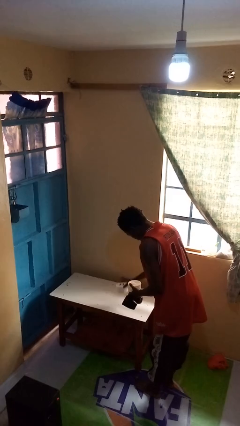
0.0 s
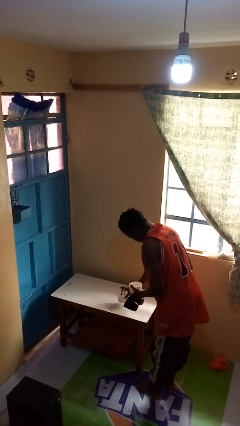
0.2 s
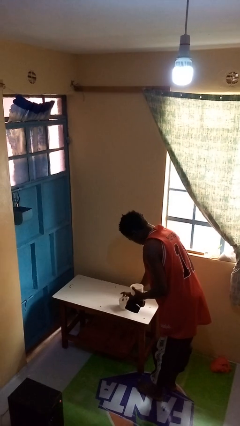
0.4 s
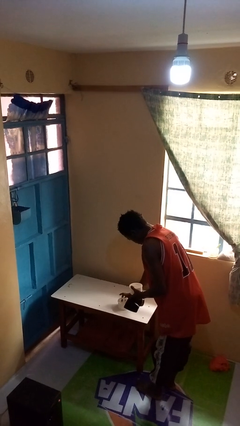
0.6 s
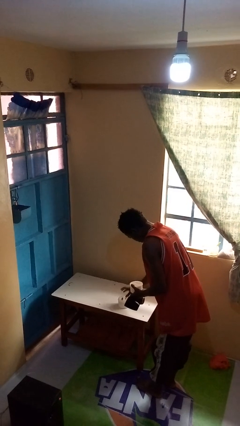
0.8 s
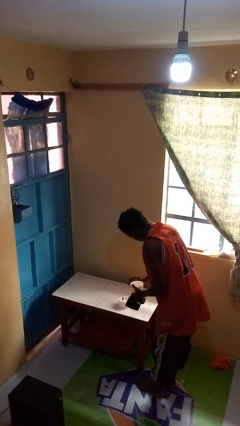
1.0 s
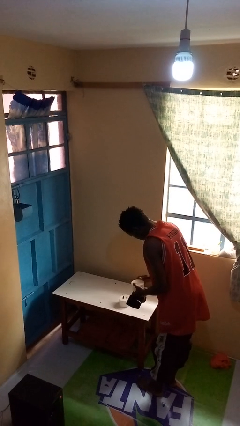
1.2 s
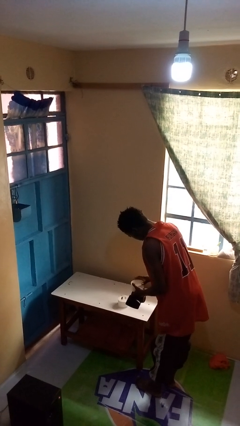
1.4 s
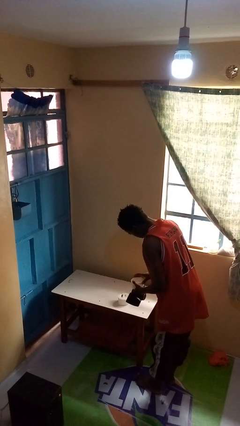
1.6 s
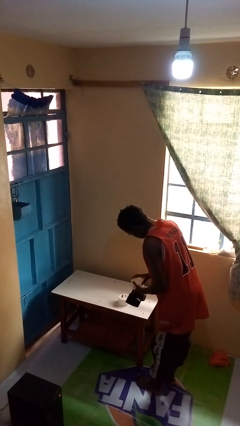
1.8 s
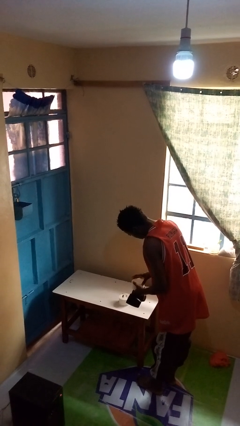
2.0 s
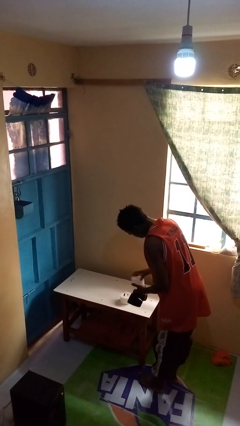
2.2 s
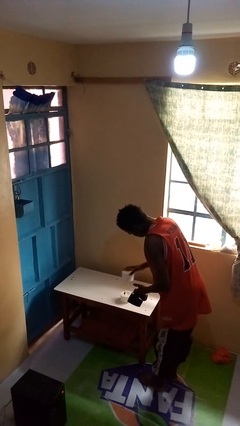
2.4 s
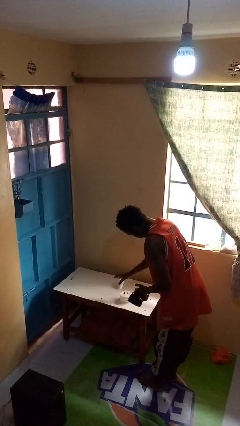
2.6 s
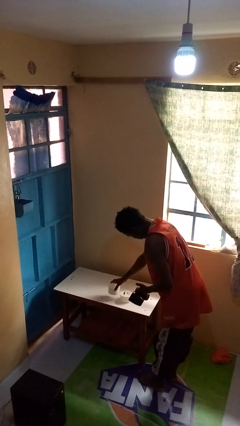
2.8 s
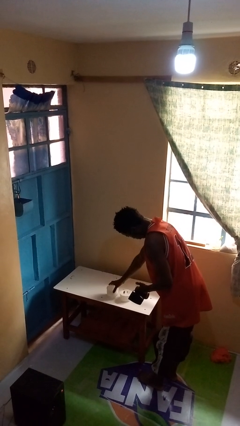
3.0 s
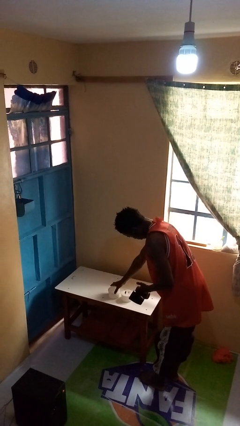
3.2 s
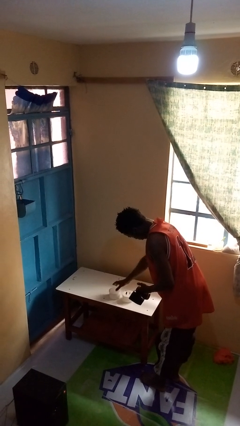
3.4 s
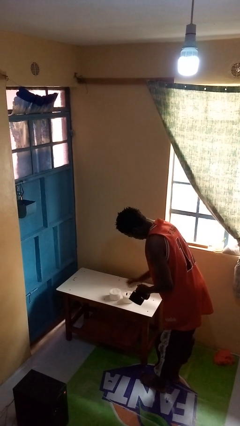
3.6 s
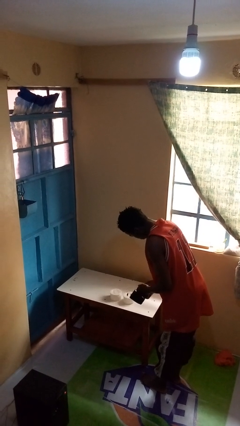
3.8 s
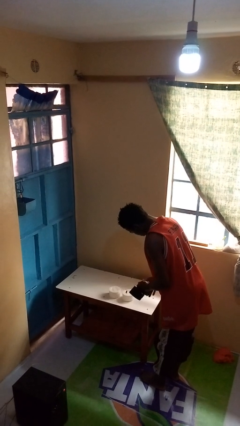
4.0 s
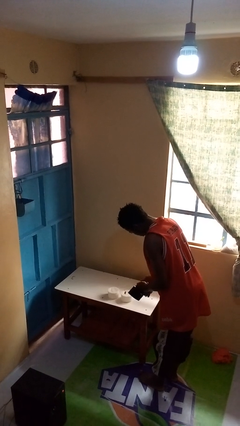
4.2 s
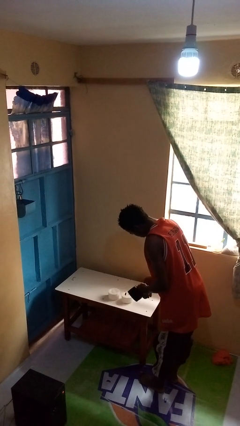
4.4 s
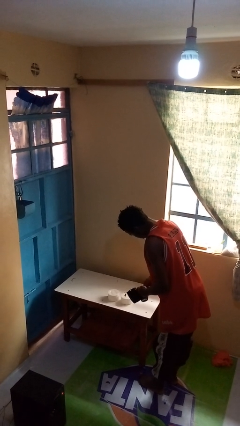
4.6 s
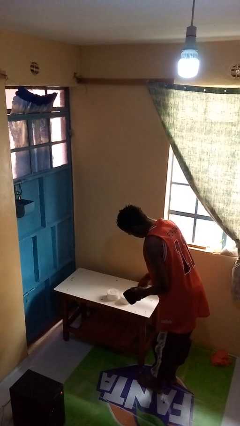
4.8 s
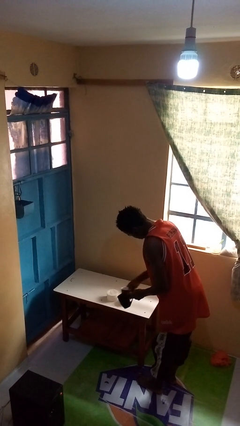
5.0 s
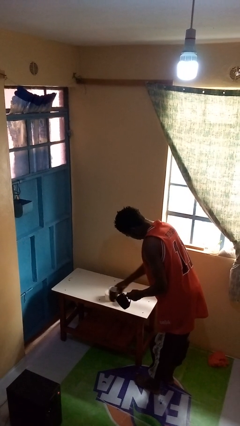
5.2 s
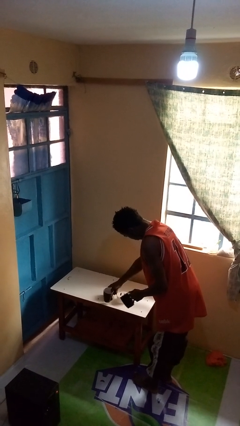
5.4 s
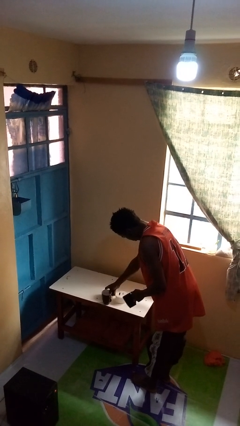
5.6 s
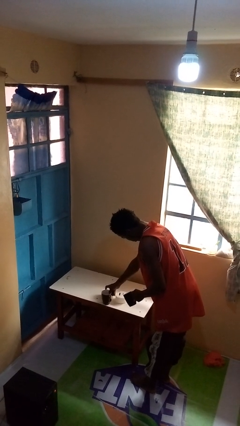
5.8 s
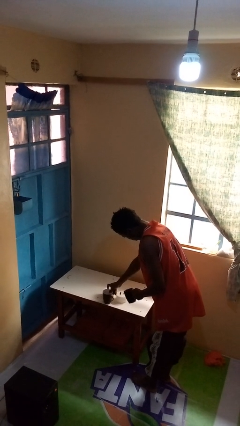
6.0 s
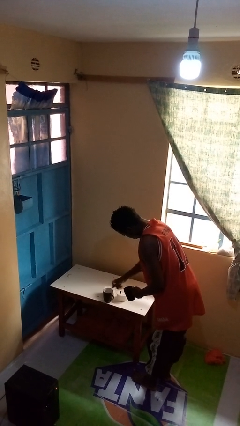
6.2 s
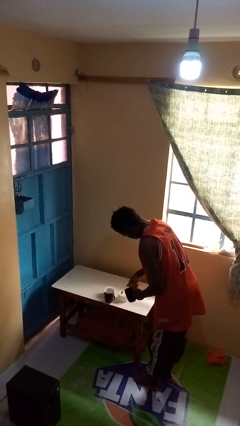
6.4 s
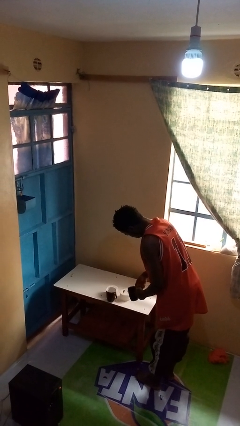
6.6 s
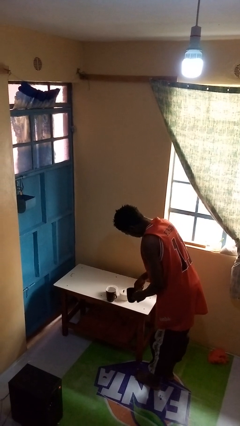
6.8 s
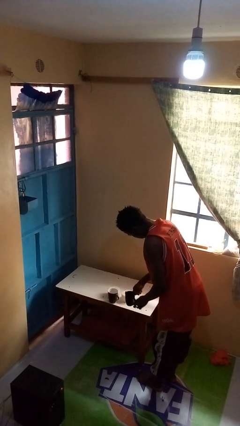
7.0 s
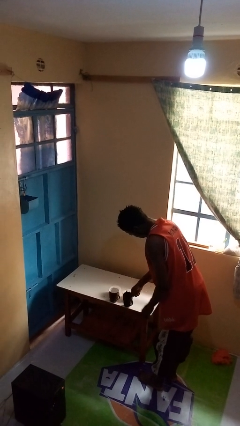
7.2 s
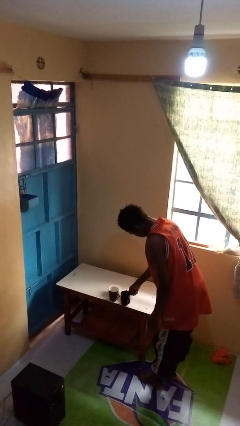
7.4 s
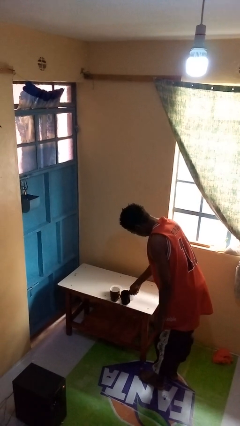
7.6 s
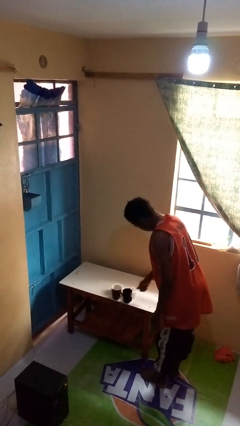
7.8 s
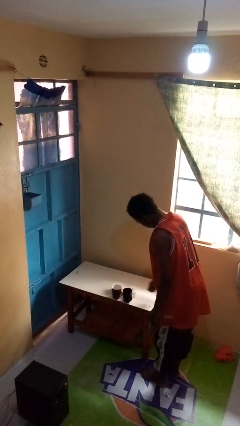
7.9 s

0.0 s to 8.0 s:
person sets table

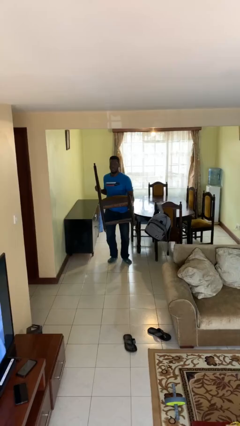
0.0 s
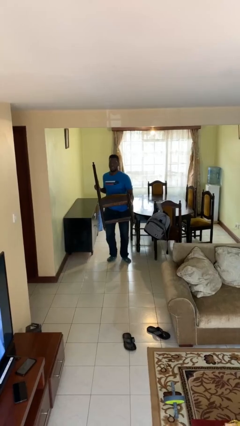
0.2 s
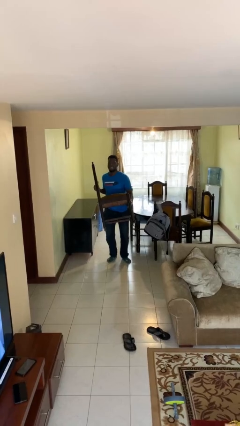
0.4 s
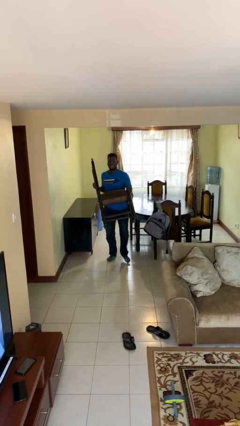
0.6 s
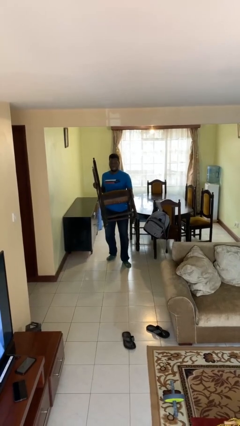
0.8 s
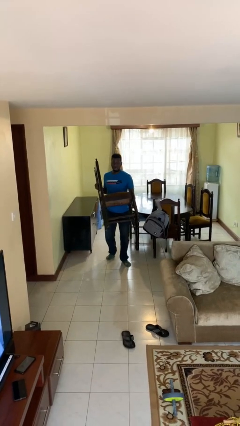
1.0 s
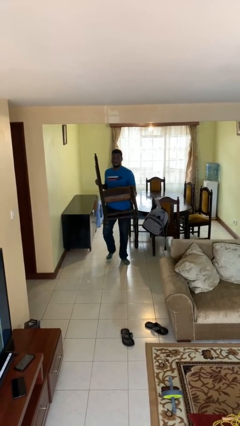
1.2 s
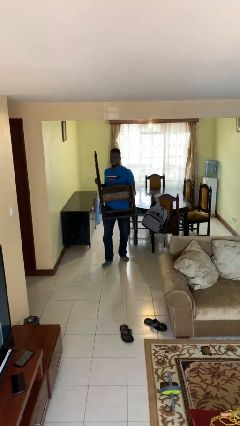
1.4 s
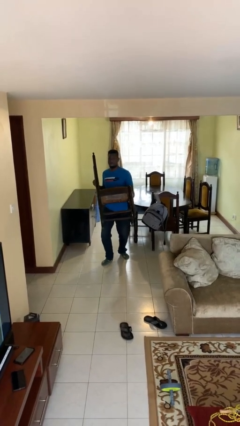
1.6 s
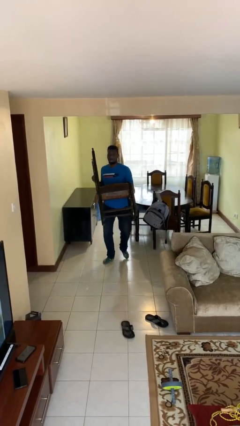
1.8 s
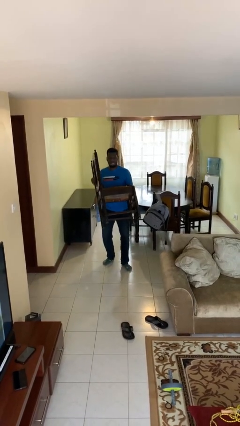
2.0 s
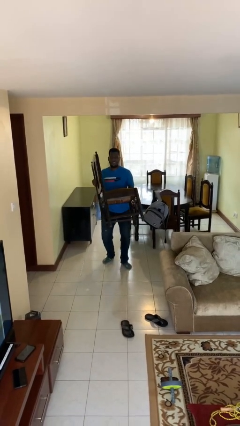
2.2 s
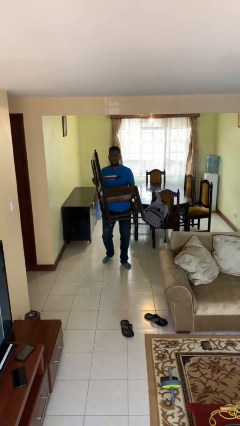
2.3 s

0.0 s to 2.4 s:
person carries heavy object

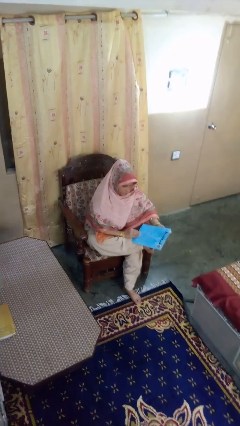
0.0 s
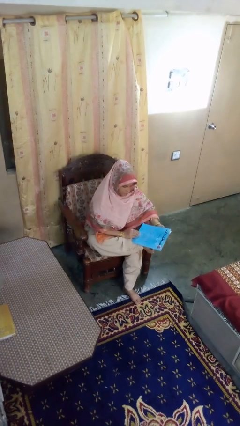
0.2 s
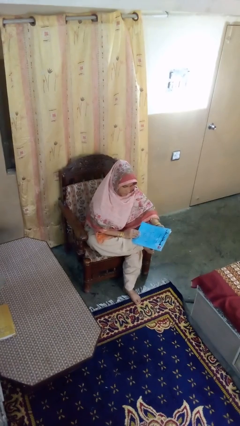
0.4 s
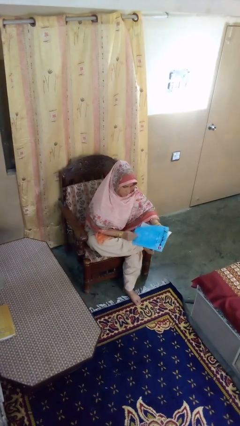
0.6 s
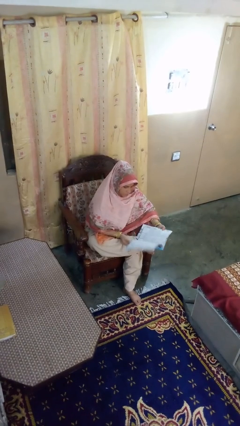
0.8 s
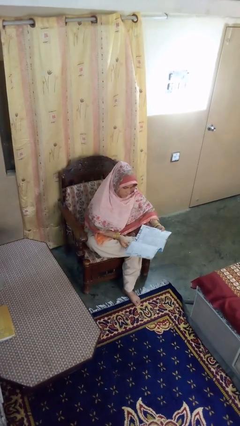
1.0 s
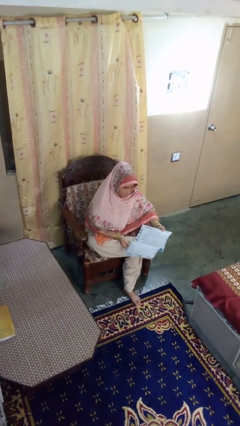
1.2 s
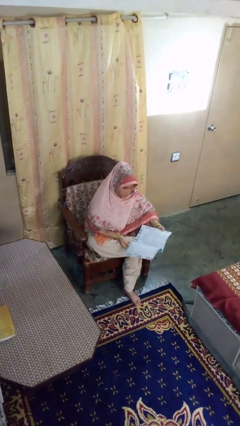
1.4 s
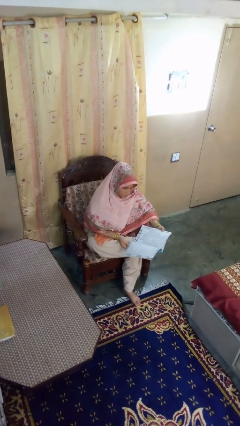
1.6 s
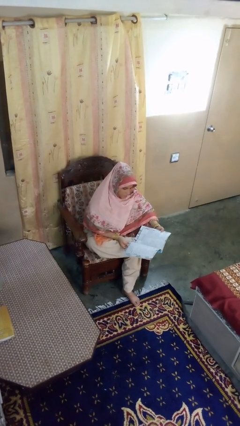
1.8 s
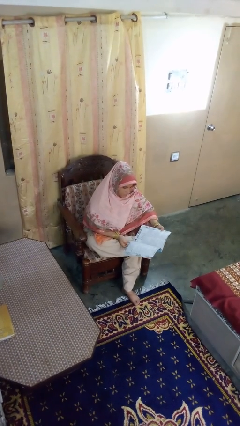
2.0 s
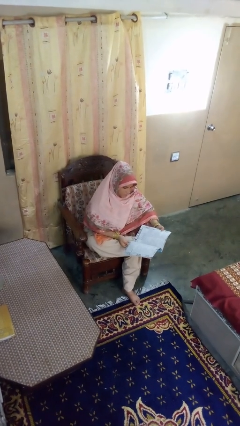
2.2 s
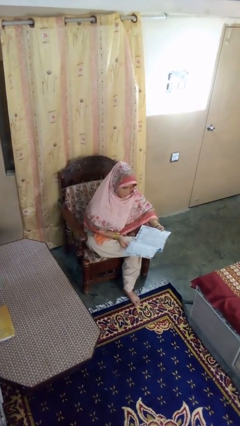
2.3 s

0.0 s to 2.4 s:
person reads magazine

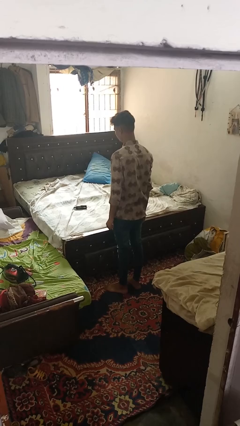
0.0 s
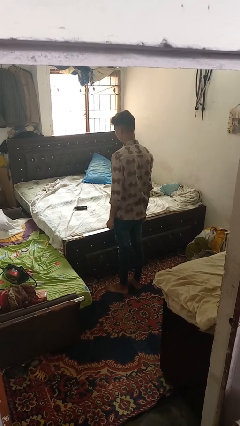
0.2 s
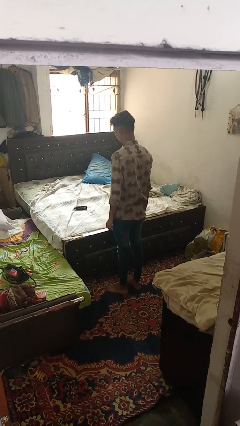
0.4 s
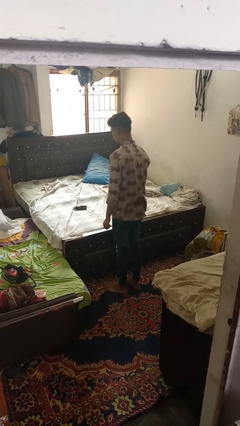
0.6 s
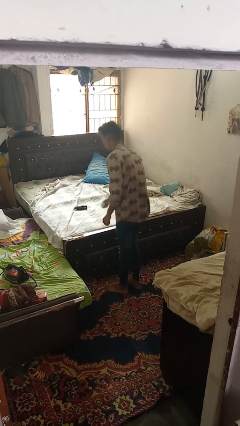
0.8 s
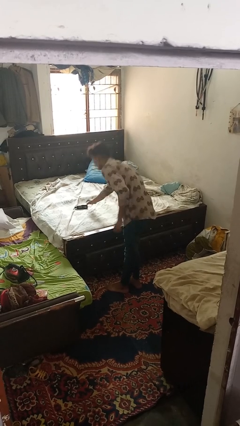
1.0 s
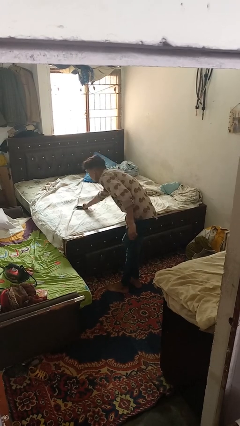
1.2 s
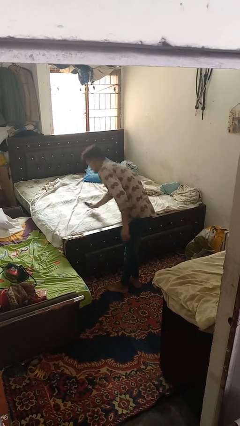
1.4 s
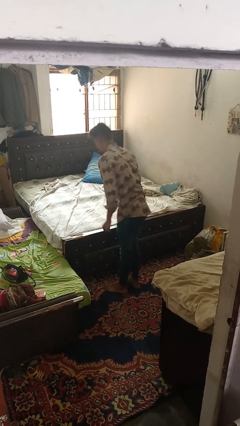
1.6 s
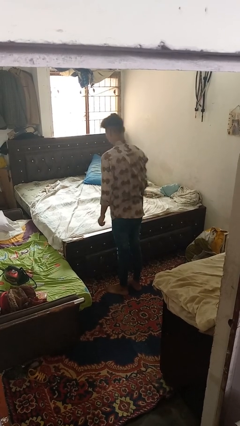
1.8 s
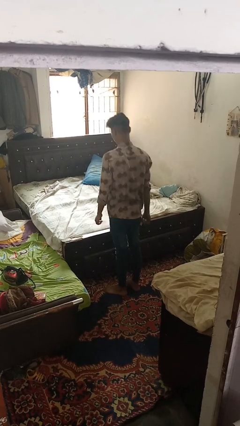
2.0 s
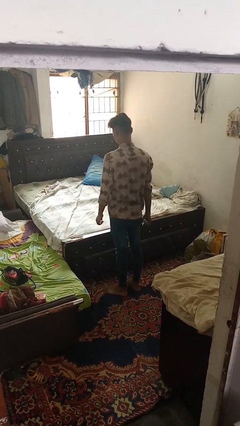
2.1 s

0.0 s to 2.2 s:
person picks up object from bed

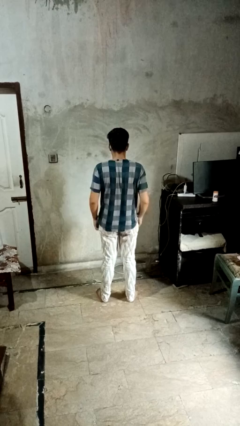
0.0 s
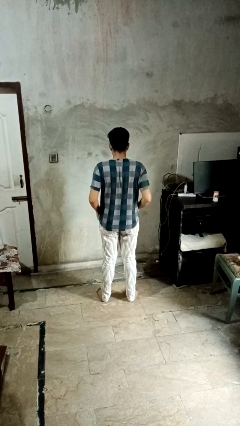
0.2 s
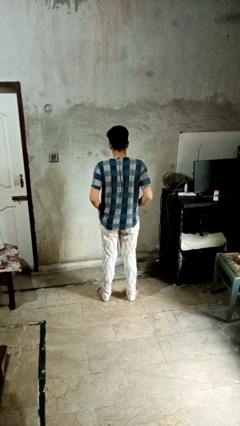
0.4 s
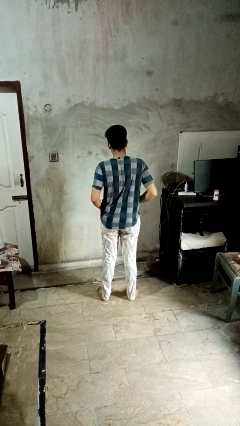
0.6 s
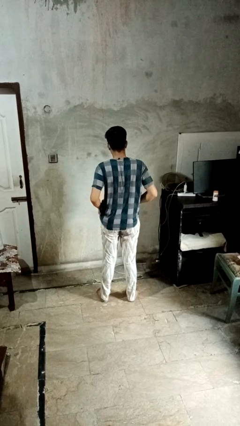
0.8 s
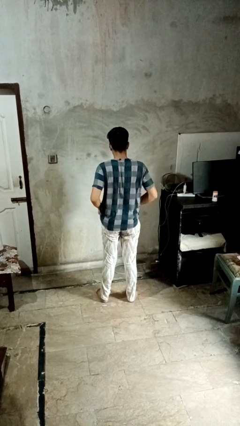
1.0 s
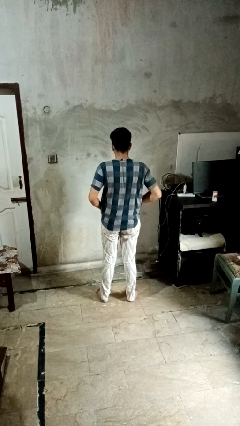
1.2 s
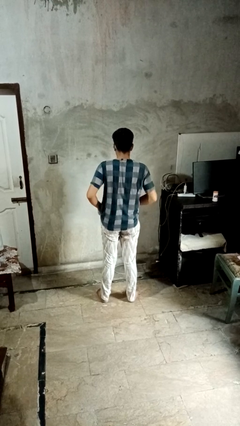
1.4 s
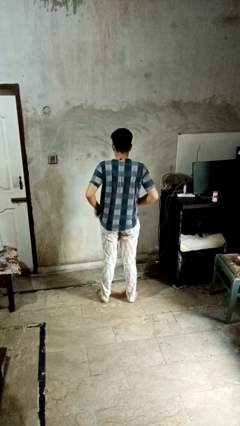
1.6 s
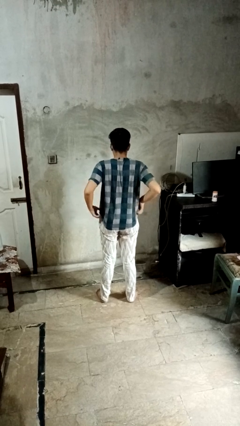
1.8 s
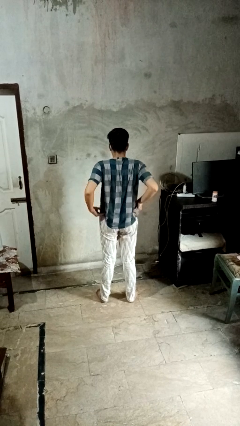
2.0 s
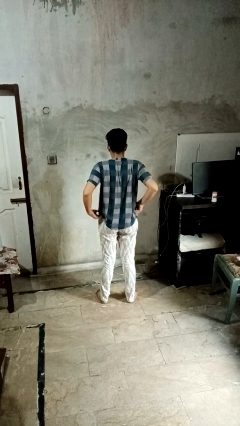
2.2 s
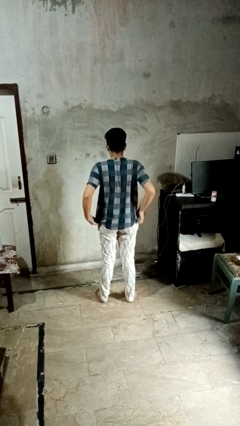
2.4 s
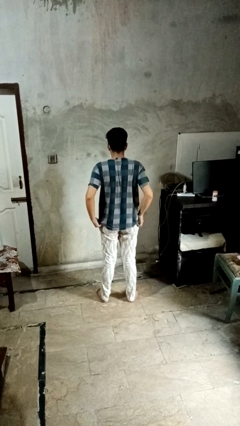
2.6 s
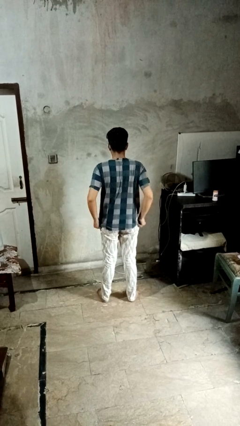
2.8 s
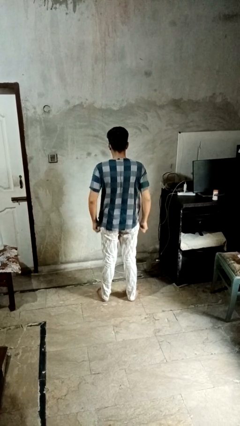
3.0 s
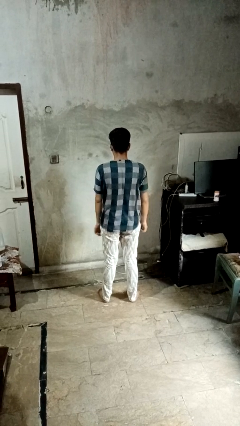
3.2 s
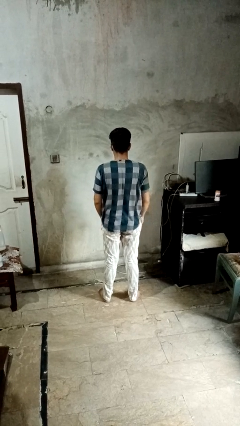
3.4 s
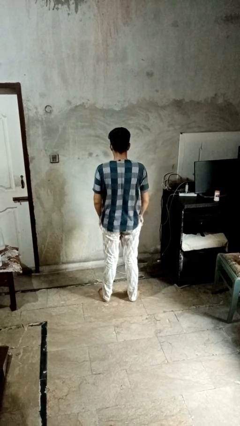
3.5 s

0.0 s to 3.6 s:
person hikes up pants
